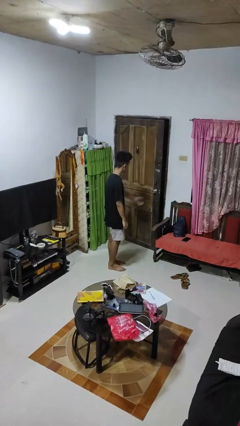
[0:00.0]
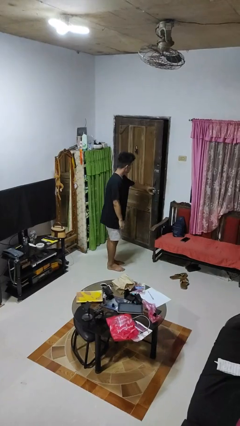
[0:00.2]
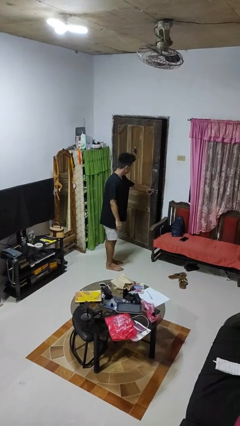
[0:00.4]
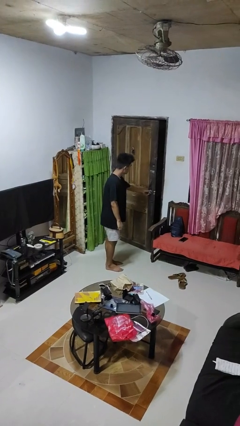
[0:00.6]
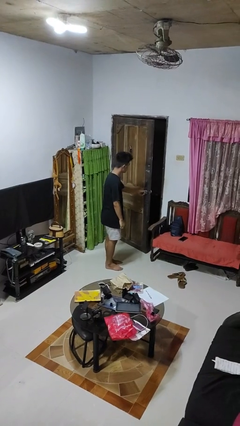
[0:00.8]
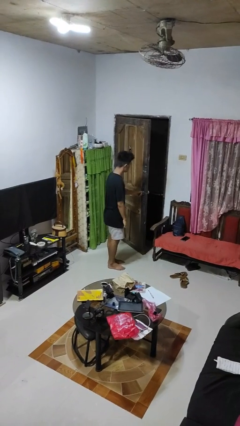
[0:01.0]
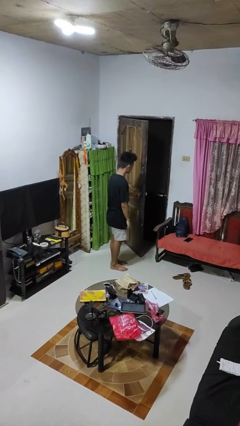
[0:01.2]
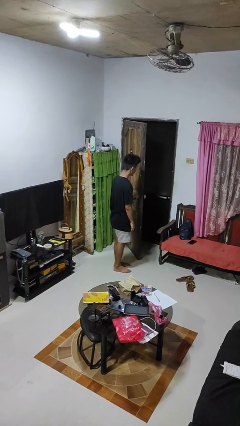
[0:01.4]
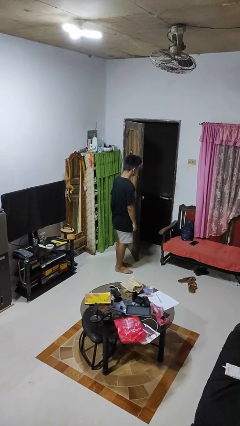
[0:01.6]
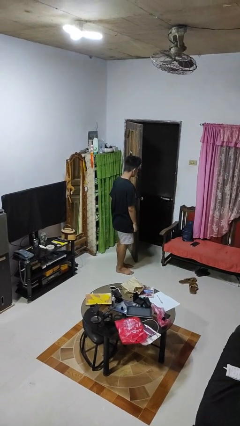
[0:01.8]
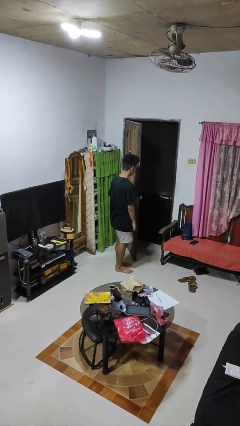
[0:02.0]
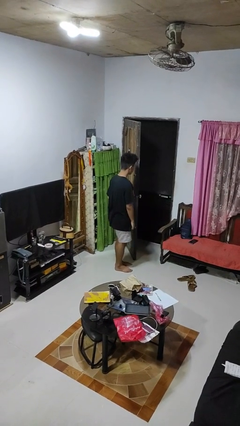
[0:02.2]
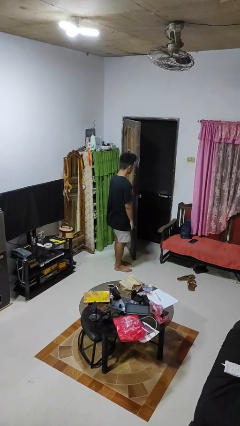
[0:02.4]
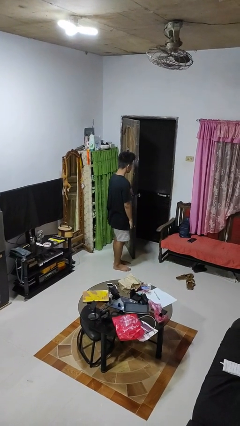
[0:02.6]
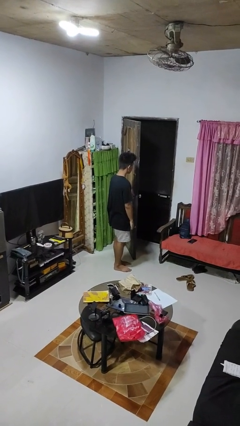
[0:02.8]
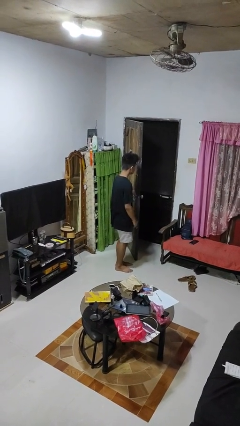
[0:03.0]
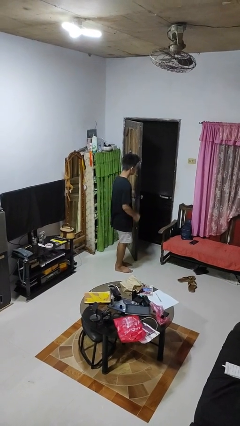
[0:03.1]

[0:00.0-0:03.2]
person opens facility door

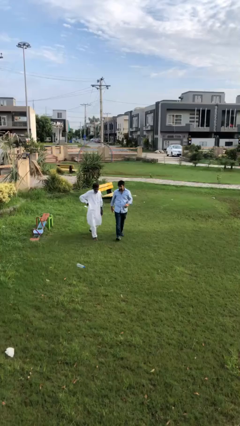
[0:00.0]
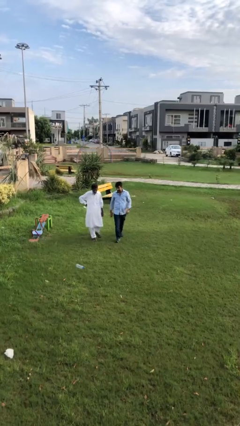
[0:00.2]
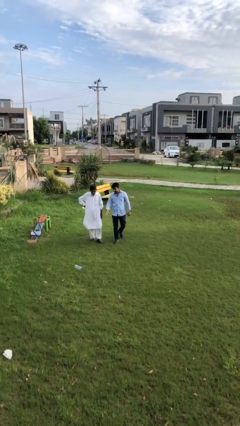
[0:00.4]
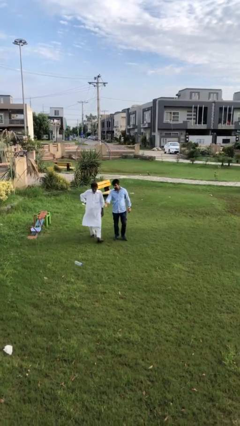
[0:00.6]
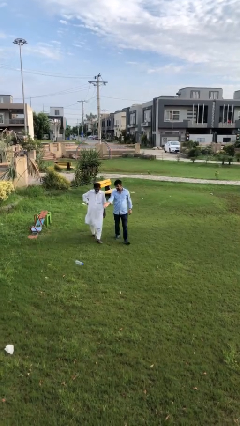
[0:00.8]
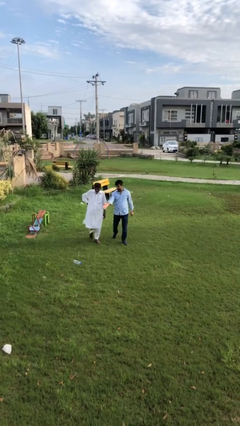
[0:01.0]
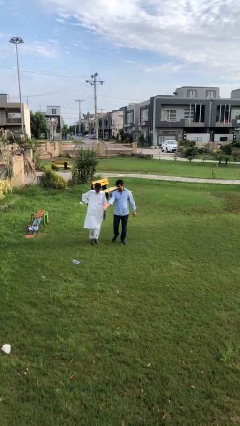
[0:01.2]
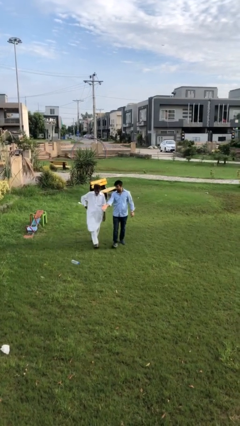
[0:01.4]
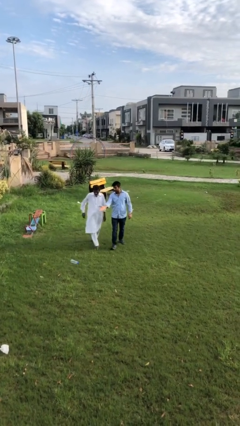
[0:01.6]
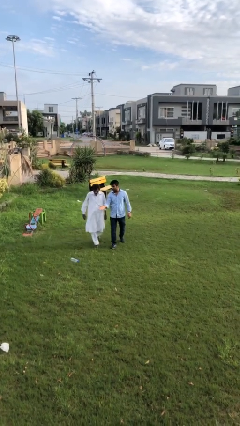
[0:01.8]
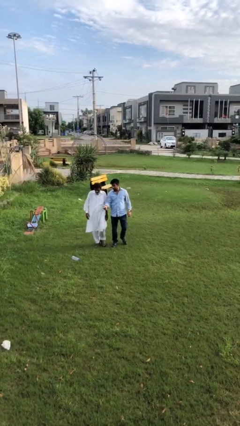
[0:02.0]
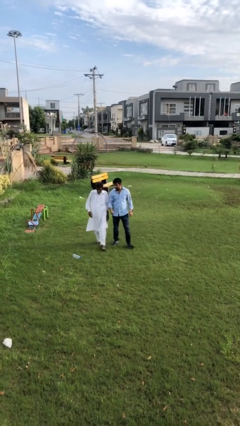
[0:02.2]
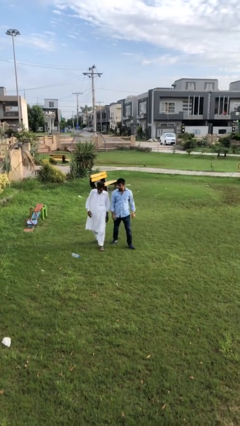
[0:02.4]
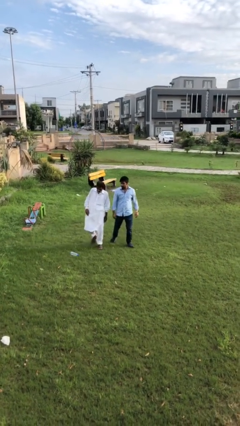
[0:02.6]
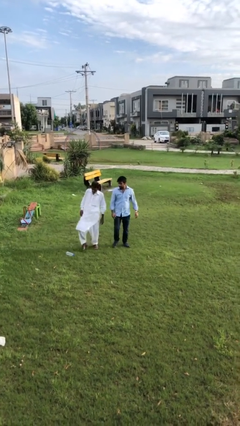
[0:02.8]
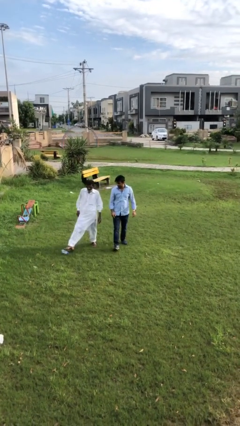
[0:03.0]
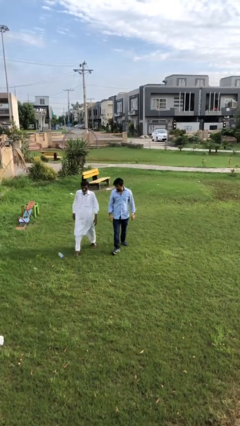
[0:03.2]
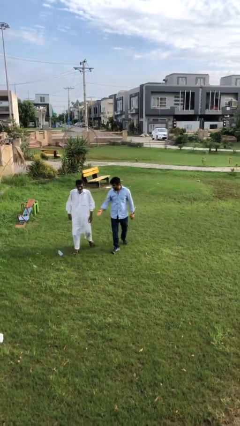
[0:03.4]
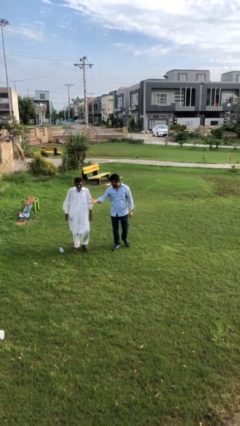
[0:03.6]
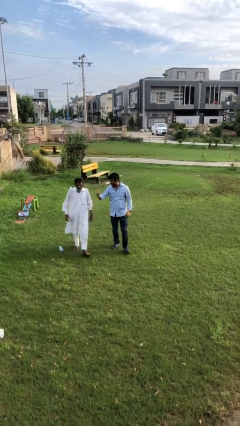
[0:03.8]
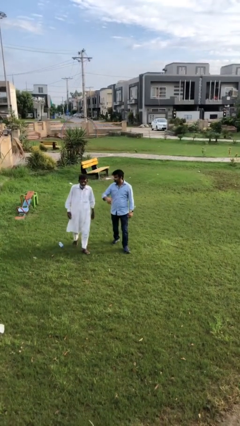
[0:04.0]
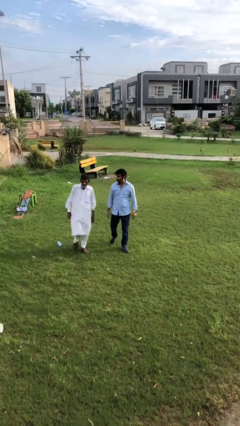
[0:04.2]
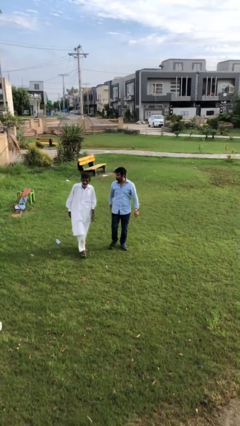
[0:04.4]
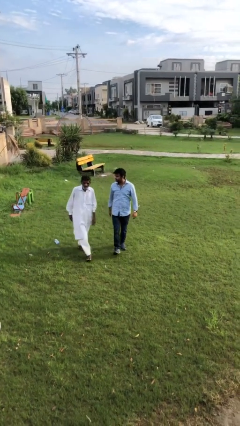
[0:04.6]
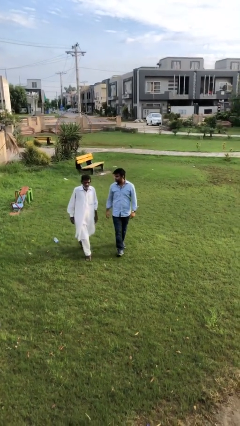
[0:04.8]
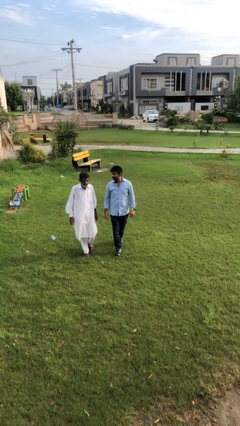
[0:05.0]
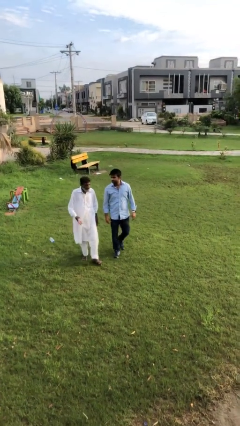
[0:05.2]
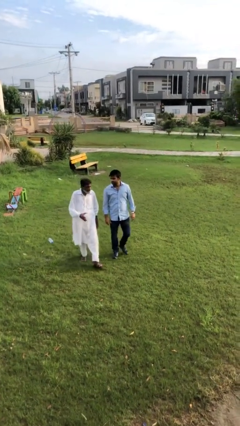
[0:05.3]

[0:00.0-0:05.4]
person talks to person

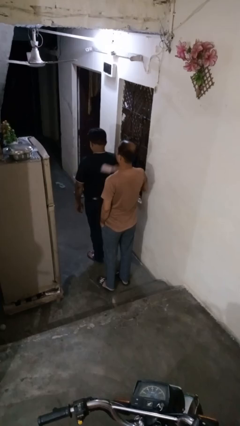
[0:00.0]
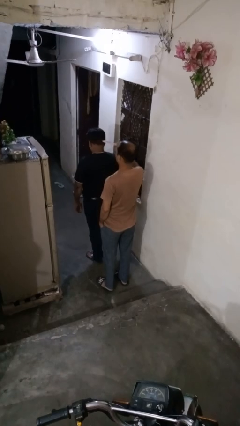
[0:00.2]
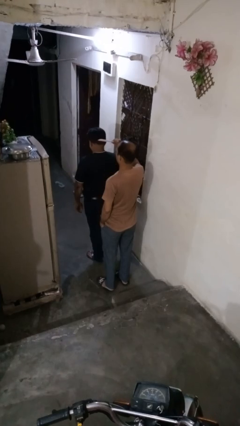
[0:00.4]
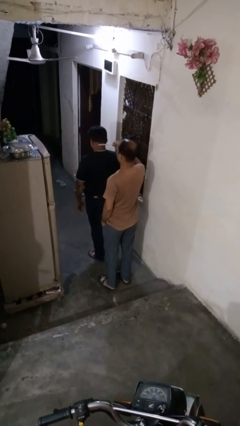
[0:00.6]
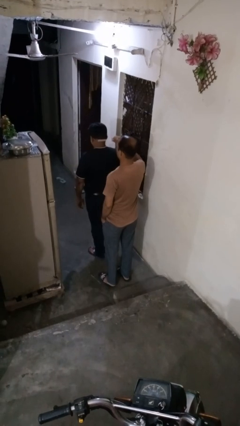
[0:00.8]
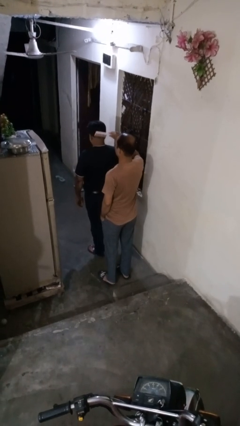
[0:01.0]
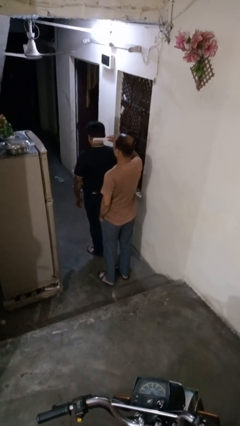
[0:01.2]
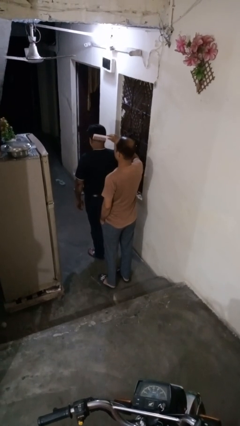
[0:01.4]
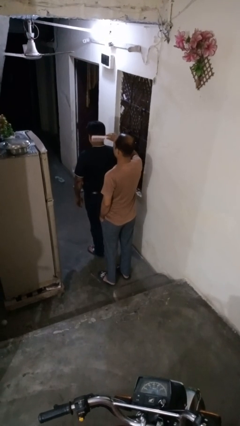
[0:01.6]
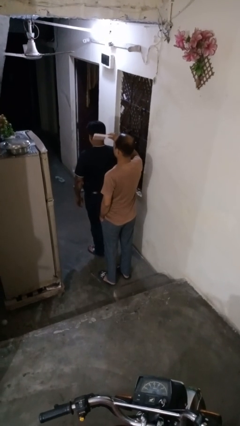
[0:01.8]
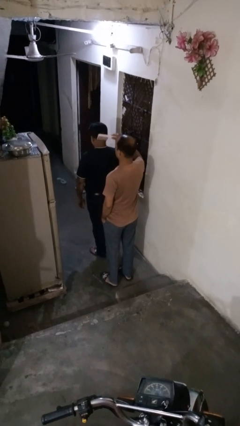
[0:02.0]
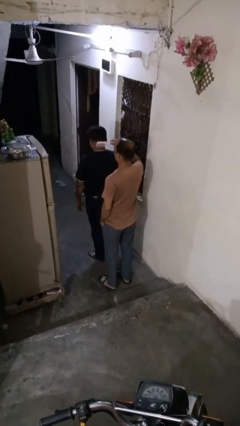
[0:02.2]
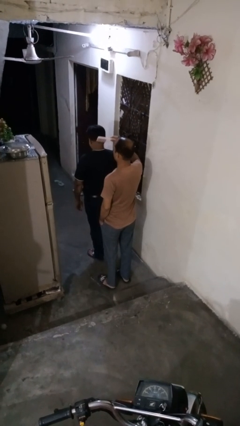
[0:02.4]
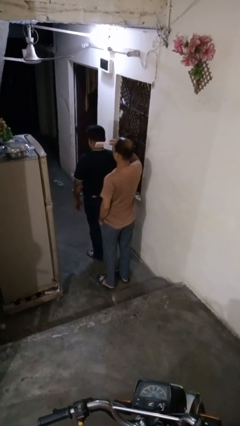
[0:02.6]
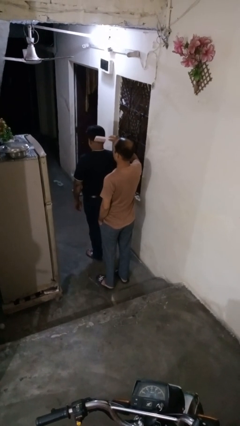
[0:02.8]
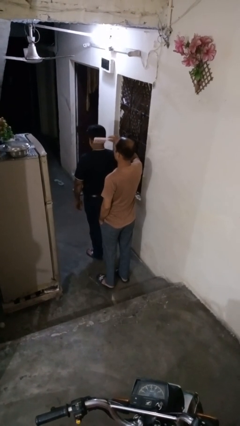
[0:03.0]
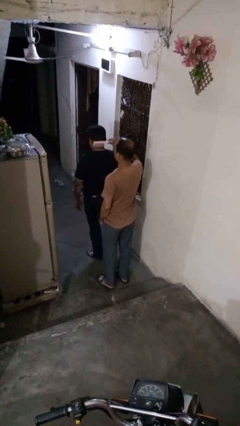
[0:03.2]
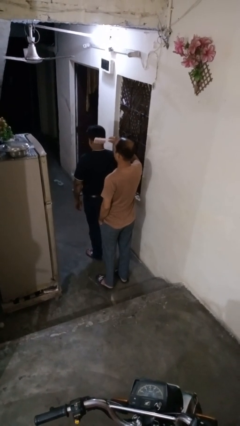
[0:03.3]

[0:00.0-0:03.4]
person brushes hair of person

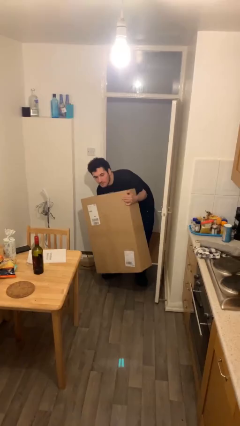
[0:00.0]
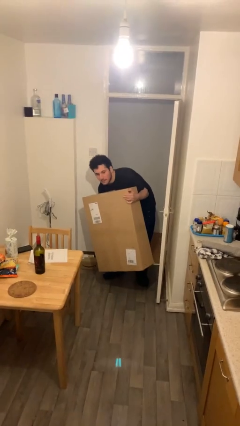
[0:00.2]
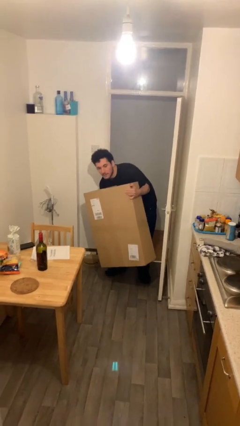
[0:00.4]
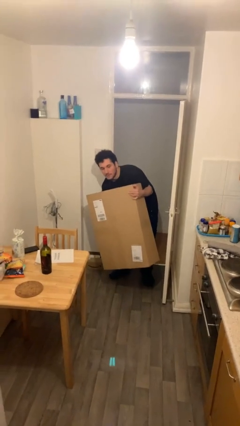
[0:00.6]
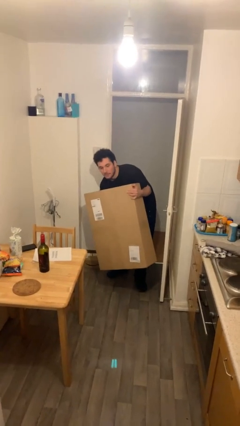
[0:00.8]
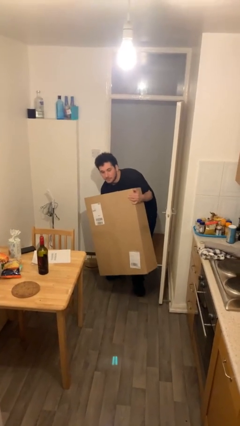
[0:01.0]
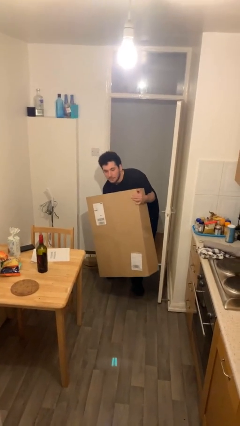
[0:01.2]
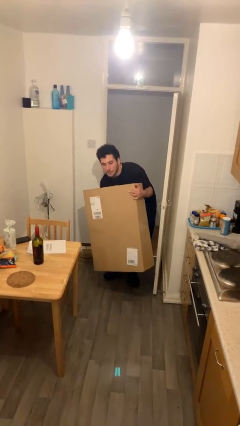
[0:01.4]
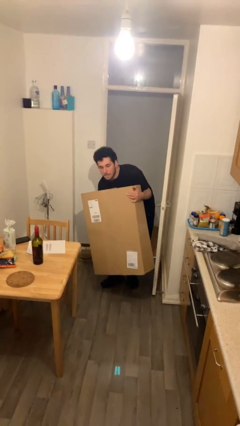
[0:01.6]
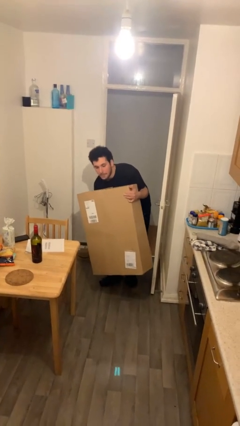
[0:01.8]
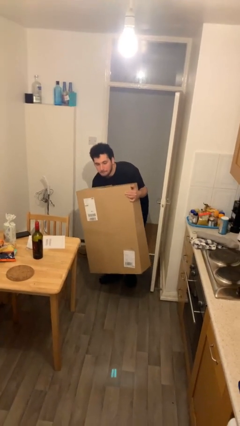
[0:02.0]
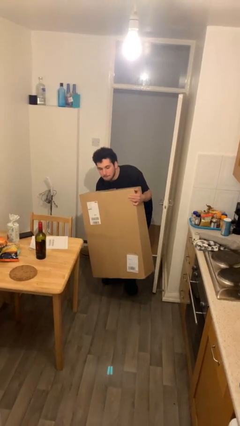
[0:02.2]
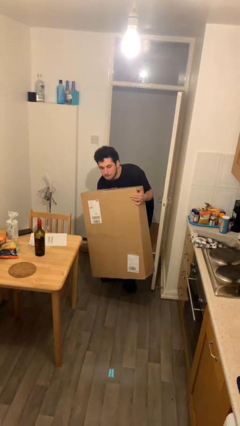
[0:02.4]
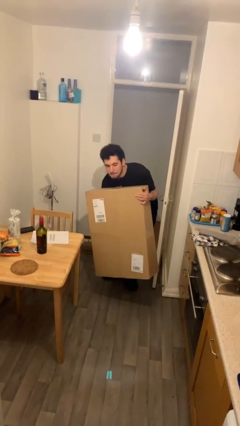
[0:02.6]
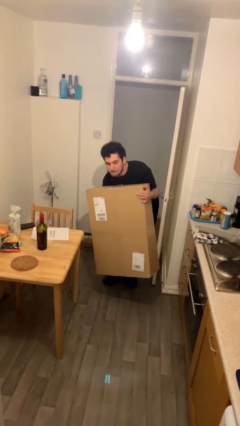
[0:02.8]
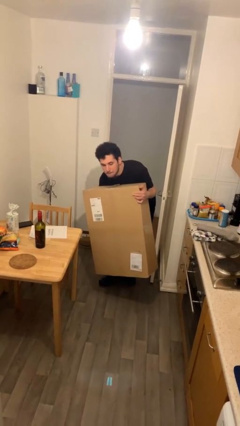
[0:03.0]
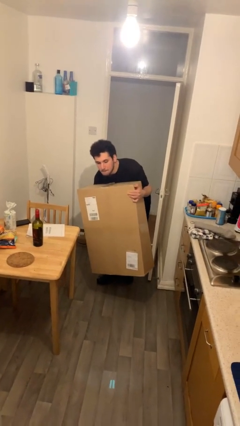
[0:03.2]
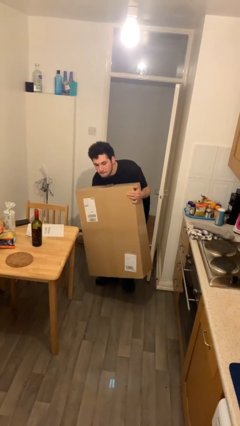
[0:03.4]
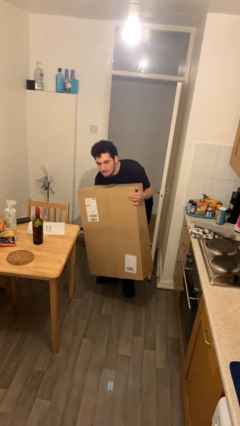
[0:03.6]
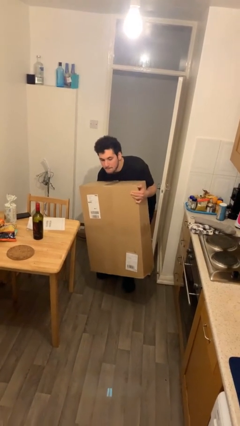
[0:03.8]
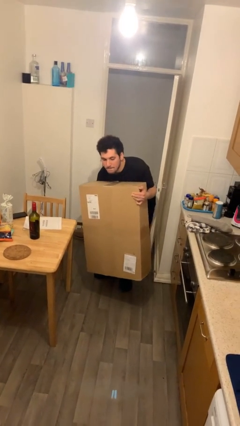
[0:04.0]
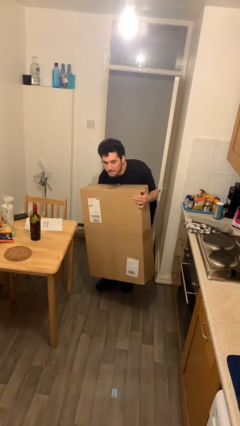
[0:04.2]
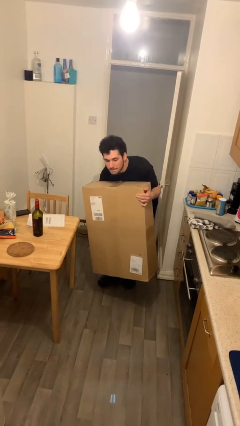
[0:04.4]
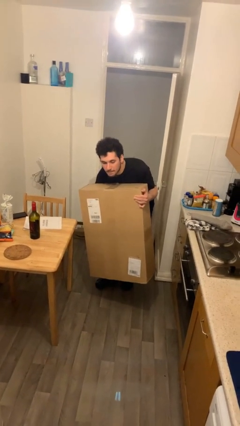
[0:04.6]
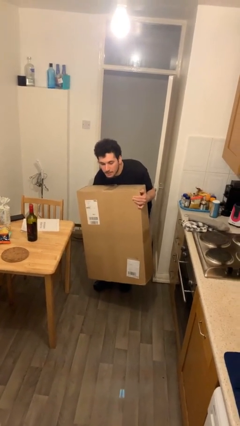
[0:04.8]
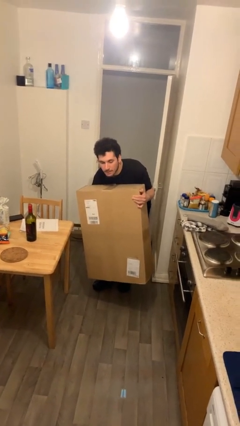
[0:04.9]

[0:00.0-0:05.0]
person carries heavy object

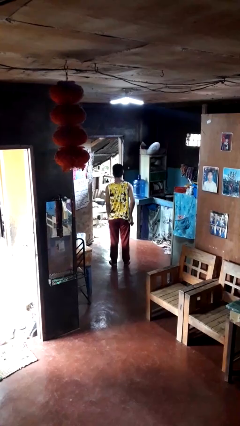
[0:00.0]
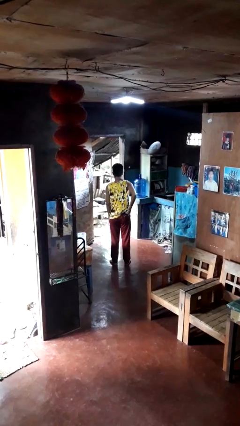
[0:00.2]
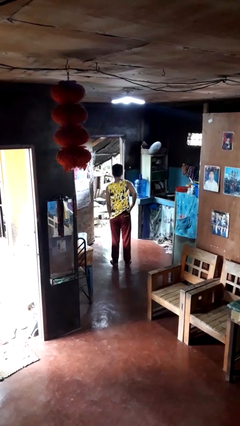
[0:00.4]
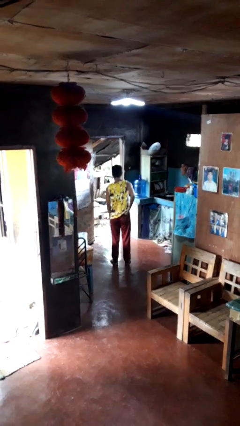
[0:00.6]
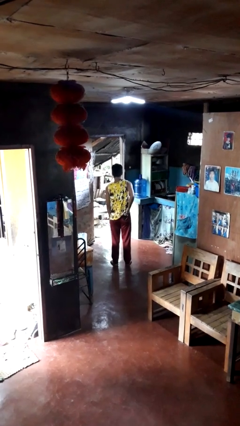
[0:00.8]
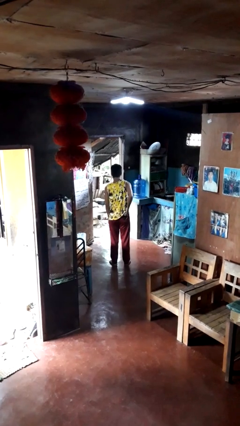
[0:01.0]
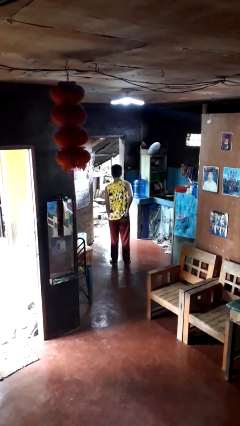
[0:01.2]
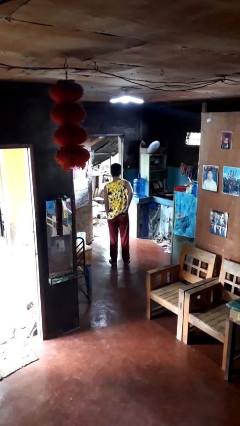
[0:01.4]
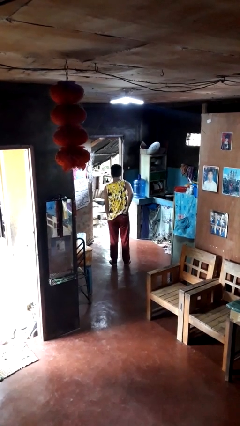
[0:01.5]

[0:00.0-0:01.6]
person puts phone into pocket
